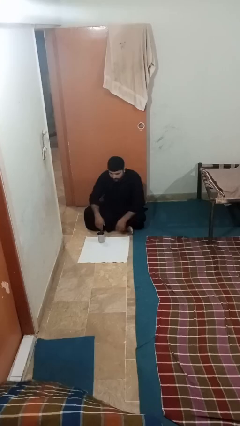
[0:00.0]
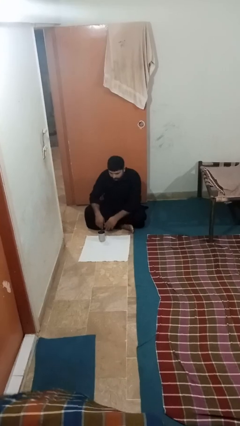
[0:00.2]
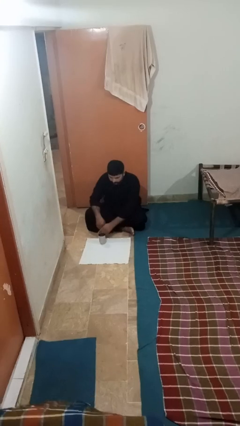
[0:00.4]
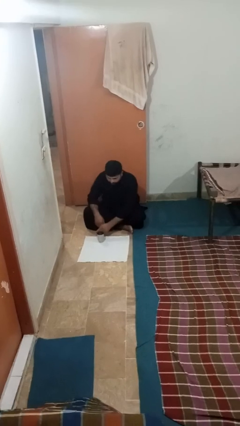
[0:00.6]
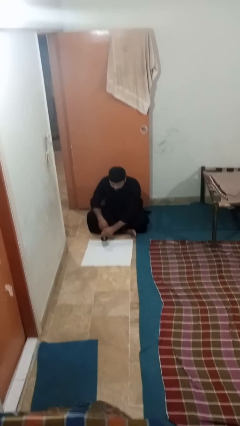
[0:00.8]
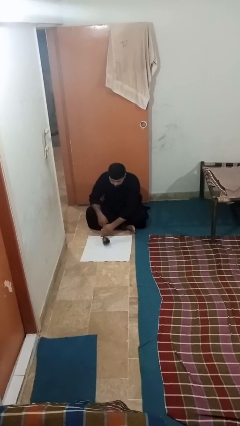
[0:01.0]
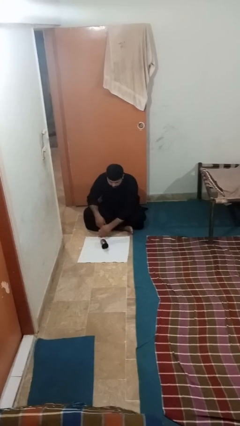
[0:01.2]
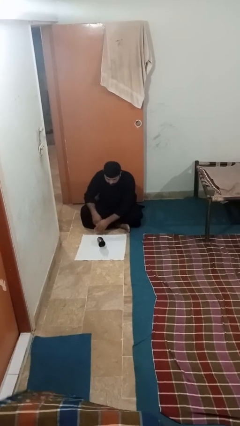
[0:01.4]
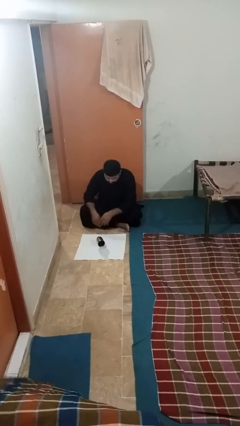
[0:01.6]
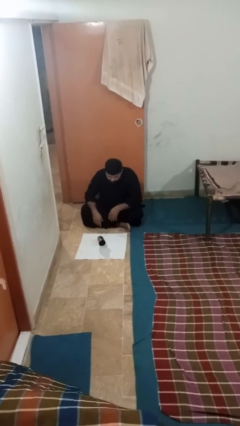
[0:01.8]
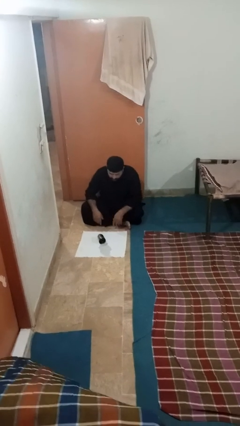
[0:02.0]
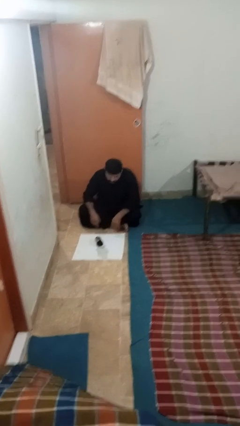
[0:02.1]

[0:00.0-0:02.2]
person spills on floor

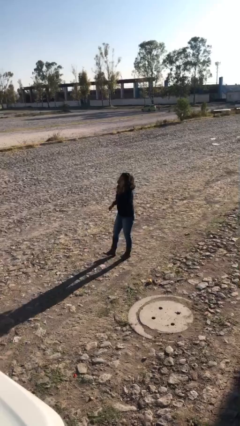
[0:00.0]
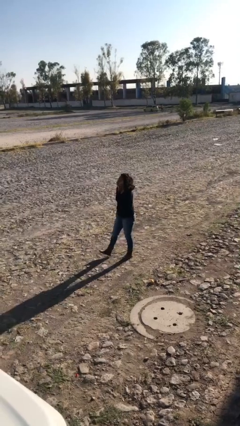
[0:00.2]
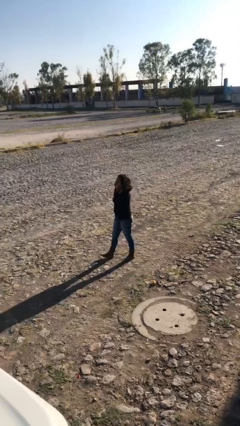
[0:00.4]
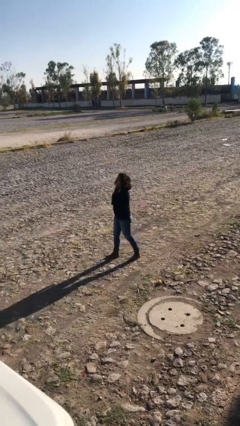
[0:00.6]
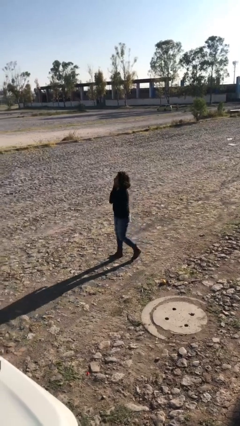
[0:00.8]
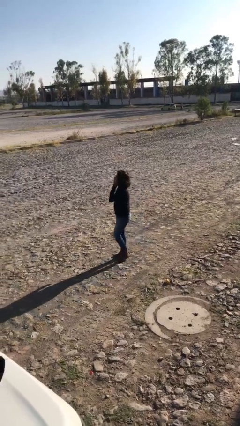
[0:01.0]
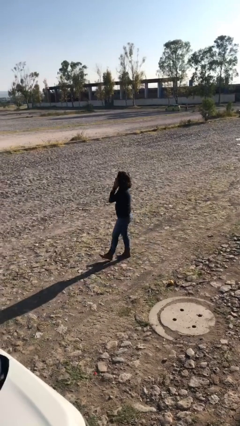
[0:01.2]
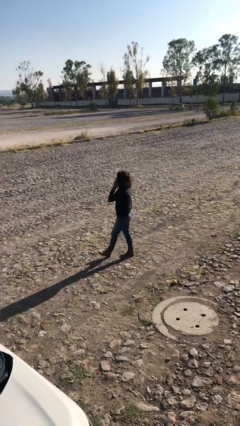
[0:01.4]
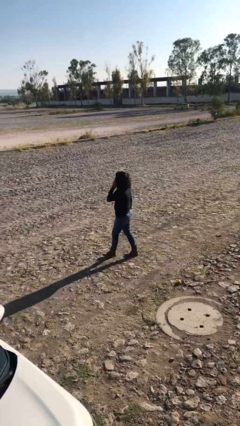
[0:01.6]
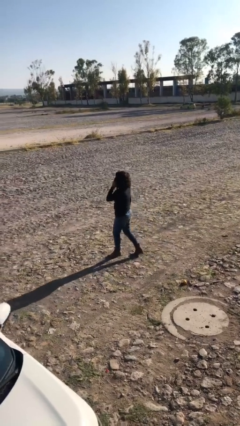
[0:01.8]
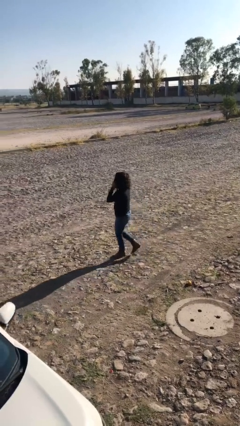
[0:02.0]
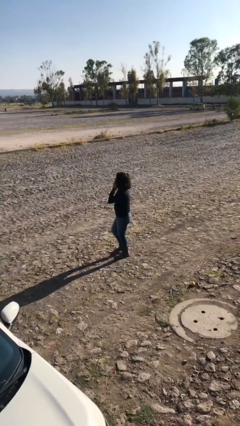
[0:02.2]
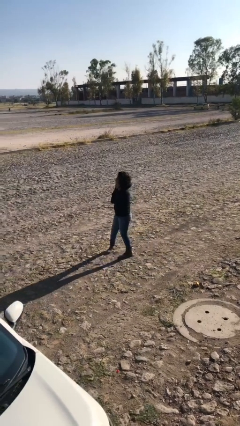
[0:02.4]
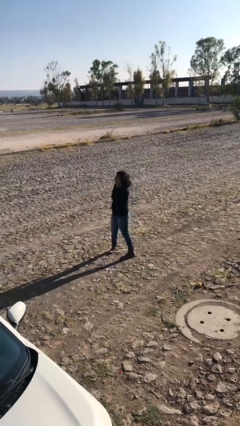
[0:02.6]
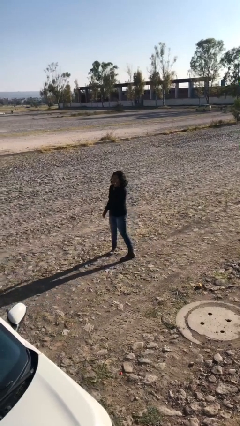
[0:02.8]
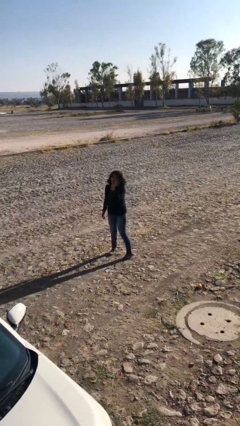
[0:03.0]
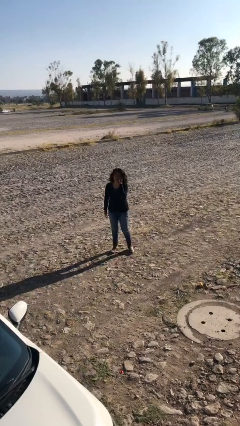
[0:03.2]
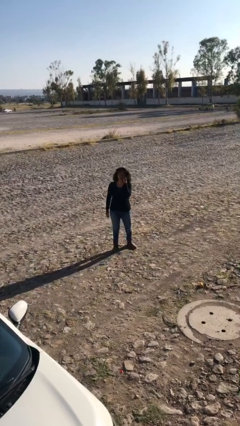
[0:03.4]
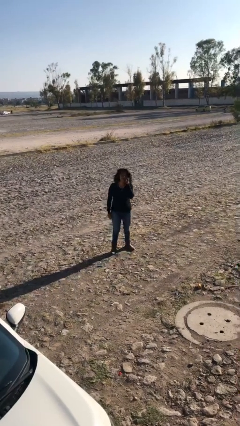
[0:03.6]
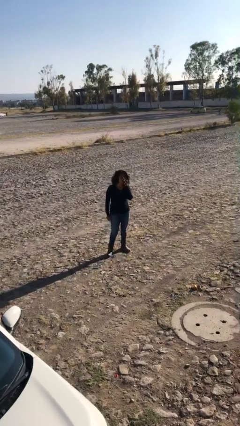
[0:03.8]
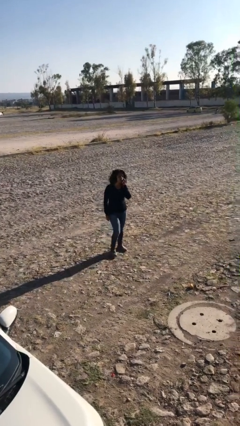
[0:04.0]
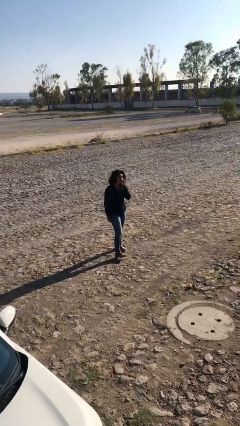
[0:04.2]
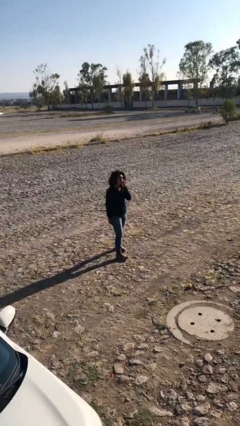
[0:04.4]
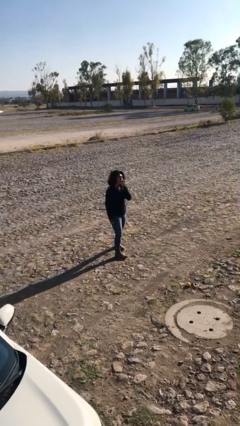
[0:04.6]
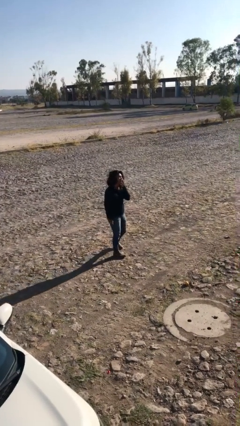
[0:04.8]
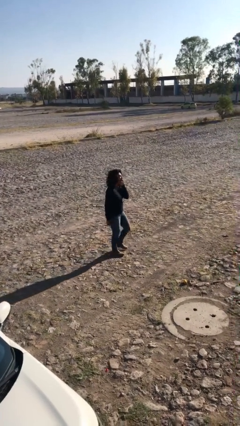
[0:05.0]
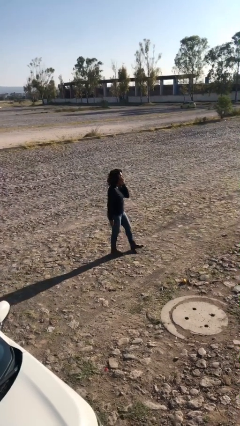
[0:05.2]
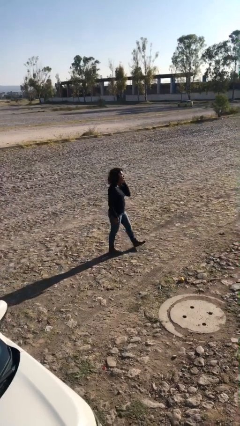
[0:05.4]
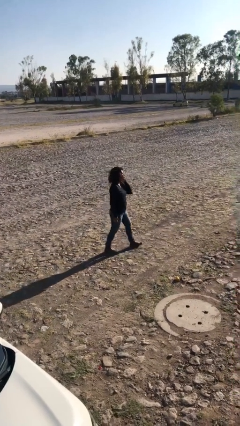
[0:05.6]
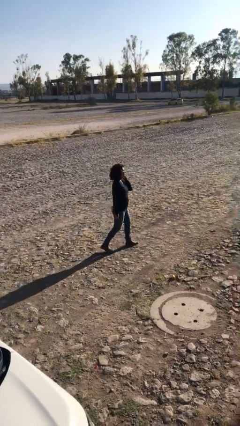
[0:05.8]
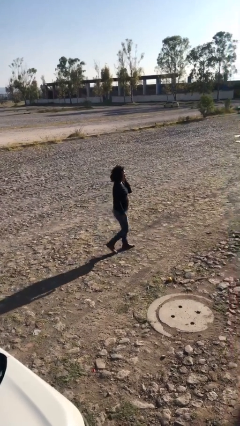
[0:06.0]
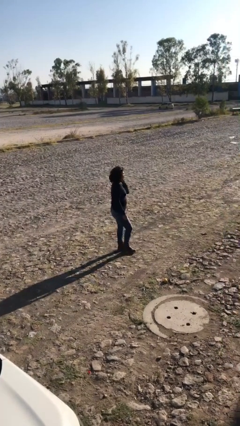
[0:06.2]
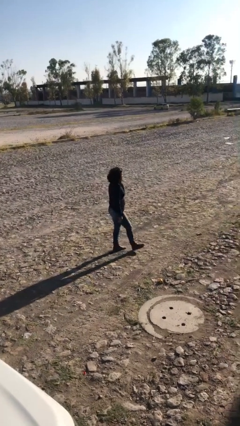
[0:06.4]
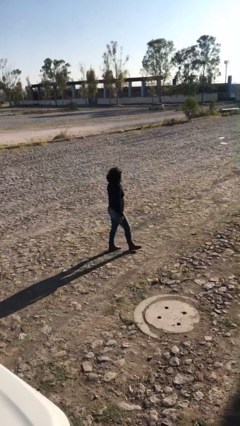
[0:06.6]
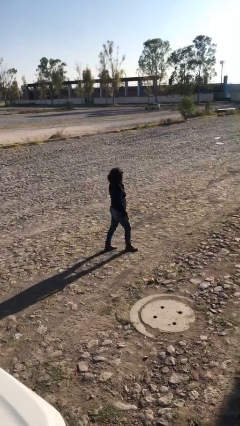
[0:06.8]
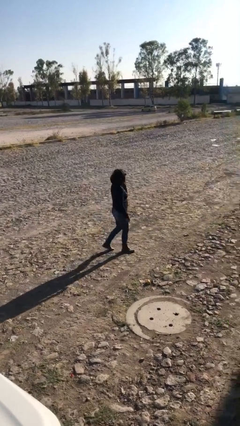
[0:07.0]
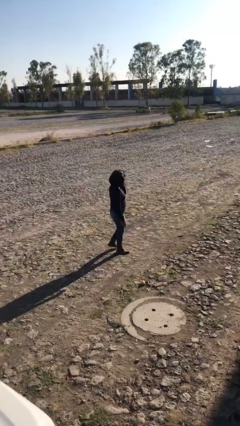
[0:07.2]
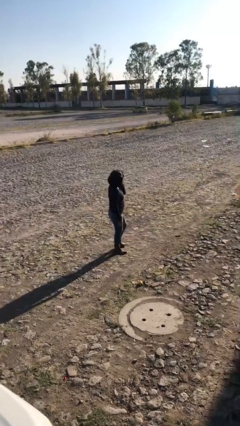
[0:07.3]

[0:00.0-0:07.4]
person talks on phone

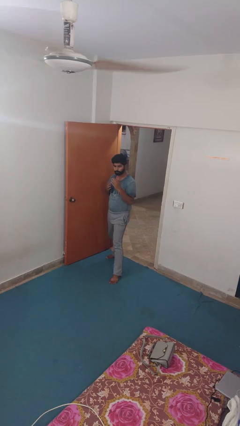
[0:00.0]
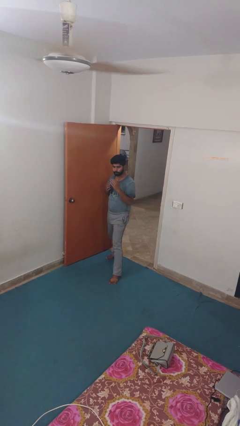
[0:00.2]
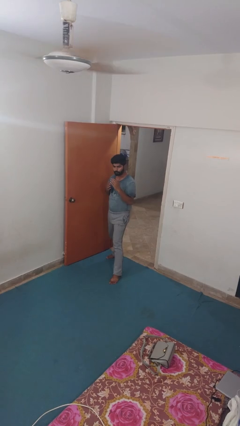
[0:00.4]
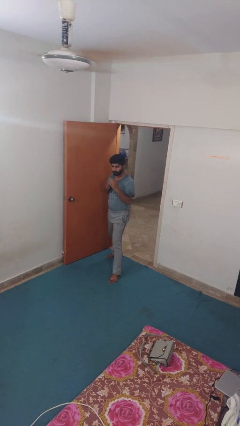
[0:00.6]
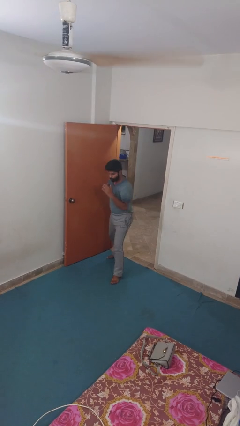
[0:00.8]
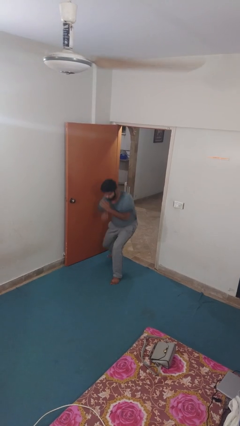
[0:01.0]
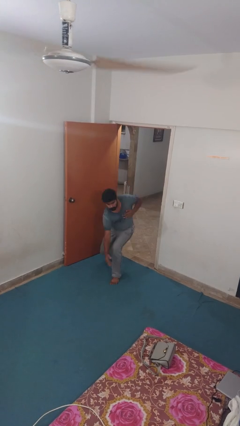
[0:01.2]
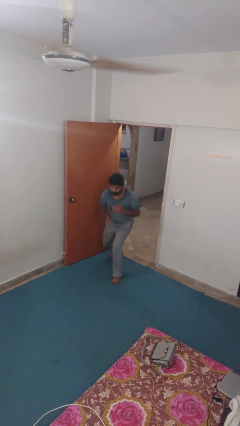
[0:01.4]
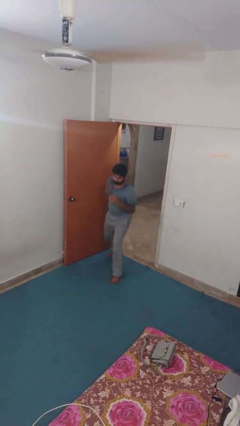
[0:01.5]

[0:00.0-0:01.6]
person karate chop

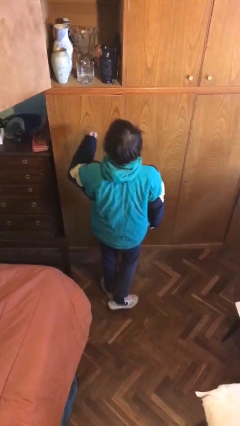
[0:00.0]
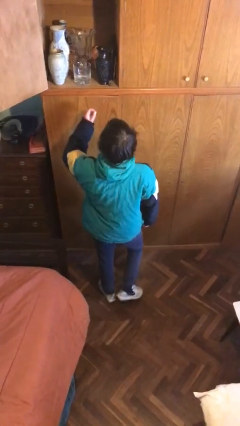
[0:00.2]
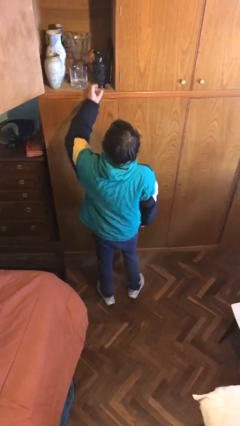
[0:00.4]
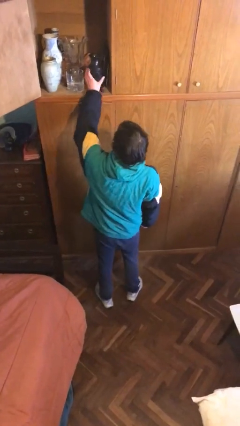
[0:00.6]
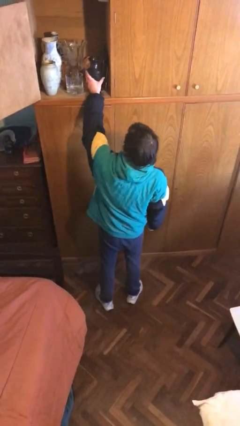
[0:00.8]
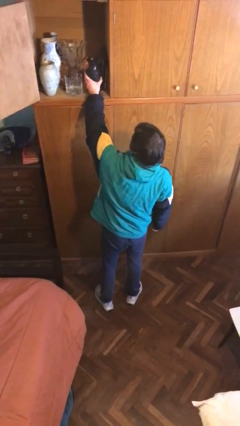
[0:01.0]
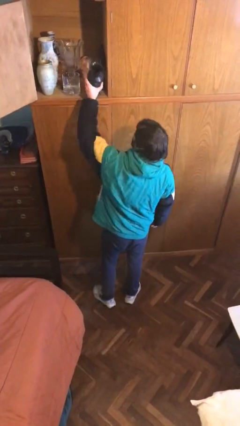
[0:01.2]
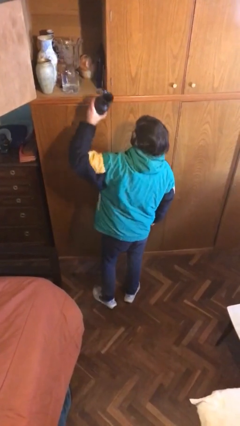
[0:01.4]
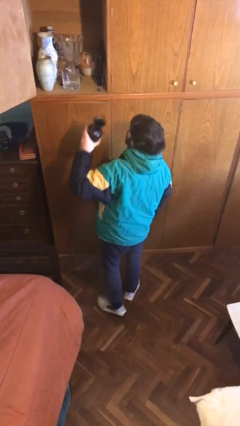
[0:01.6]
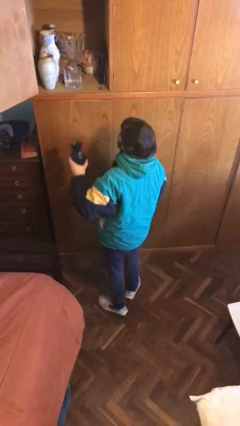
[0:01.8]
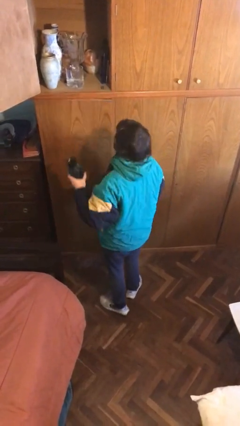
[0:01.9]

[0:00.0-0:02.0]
person picks up object from cabinet

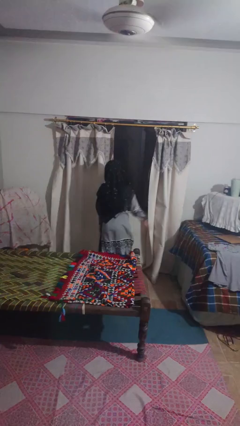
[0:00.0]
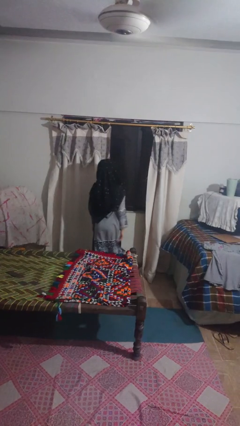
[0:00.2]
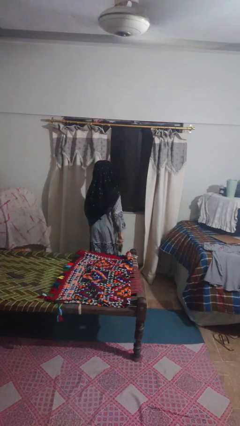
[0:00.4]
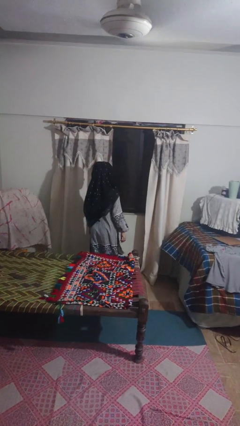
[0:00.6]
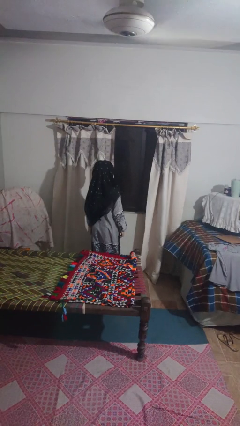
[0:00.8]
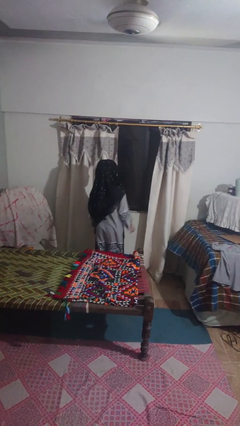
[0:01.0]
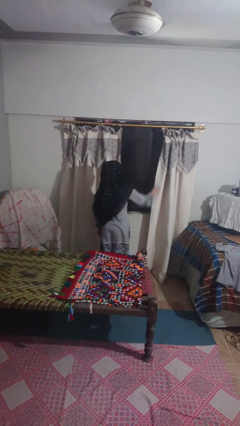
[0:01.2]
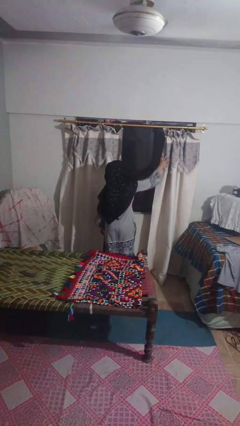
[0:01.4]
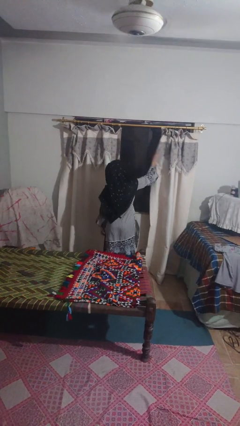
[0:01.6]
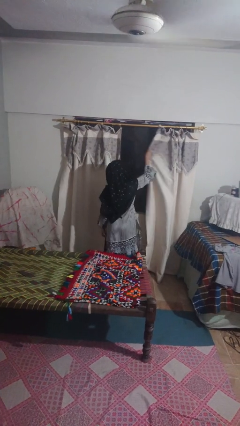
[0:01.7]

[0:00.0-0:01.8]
person closes curtains

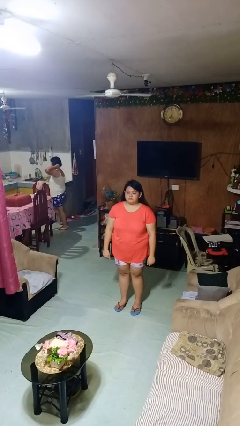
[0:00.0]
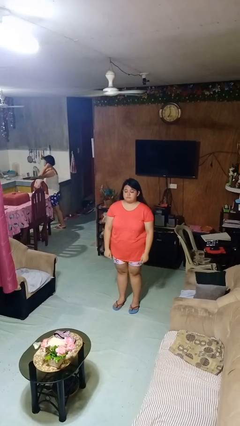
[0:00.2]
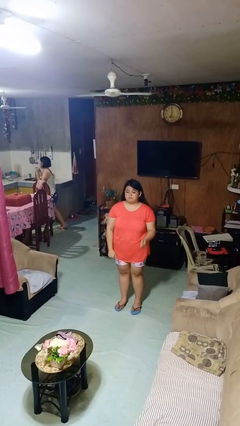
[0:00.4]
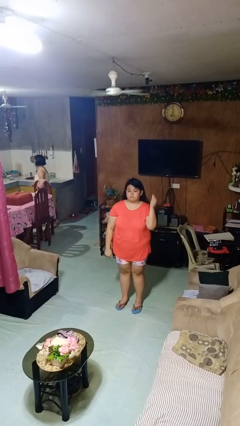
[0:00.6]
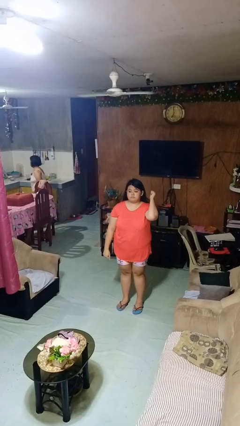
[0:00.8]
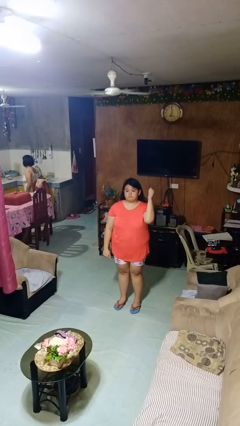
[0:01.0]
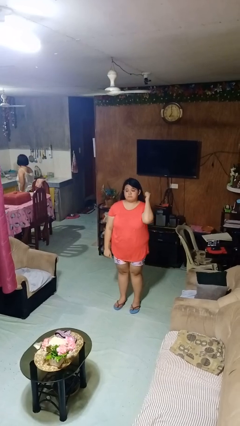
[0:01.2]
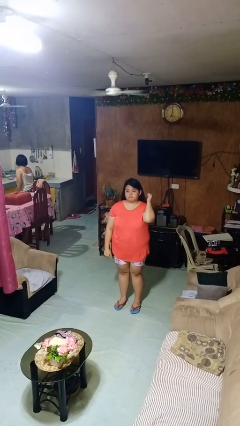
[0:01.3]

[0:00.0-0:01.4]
person gestures behind me

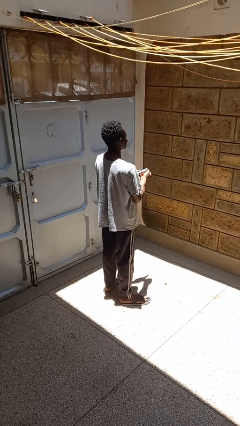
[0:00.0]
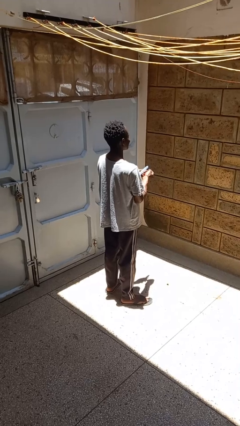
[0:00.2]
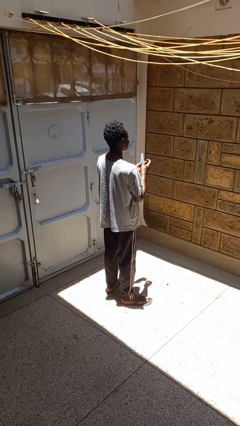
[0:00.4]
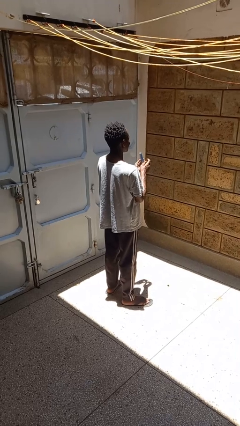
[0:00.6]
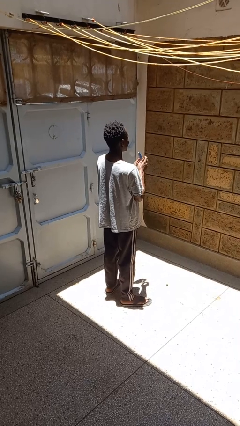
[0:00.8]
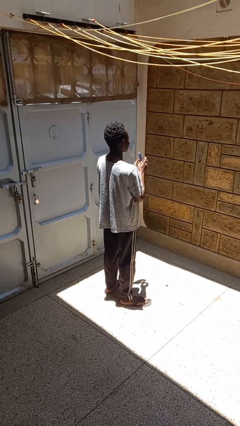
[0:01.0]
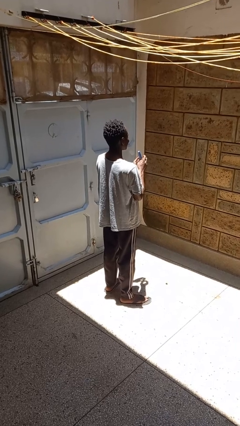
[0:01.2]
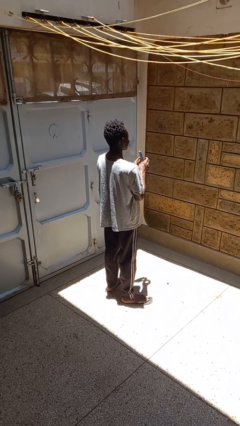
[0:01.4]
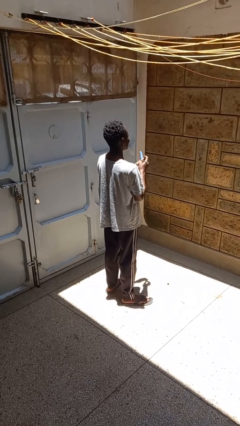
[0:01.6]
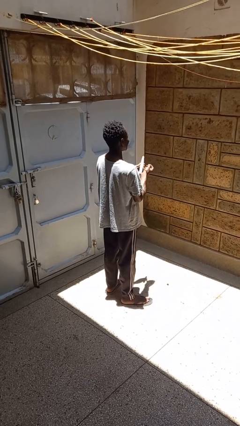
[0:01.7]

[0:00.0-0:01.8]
person files fingernails
